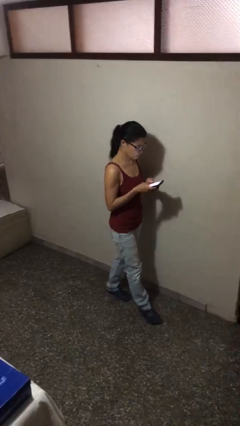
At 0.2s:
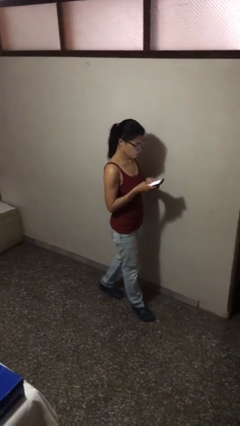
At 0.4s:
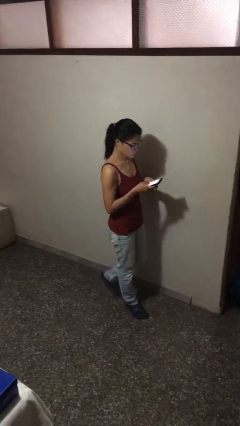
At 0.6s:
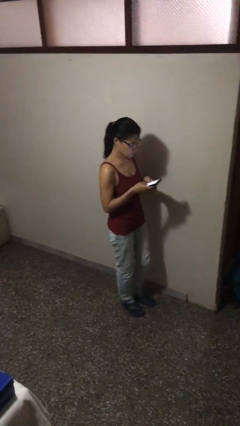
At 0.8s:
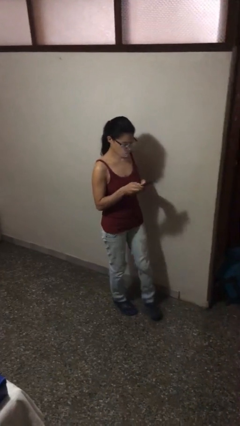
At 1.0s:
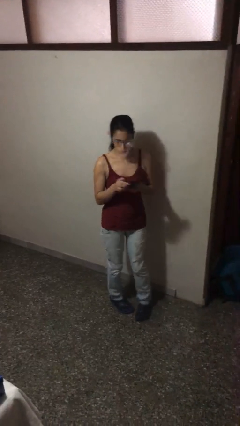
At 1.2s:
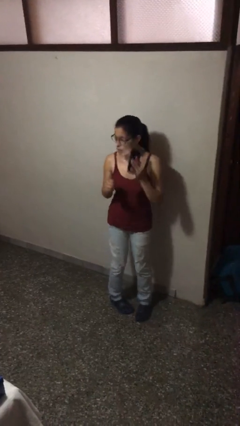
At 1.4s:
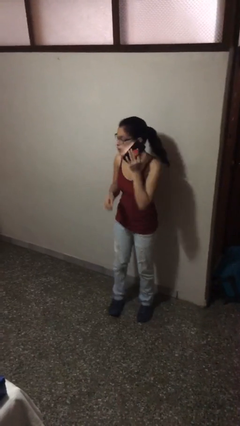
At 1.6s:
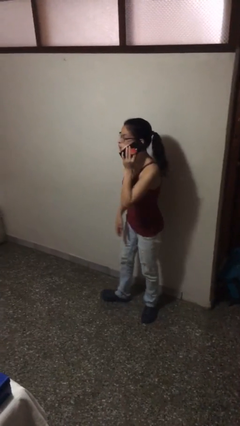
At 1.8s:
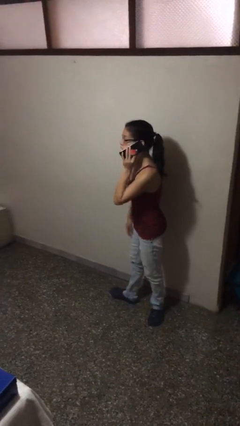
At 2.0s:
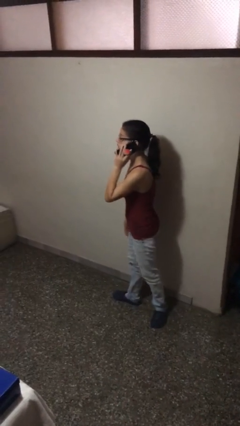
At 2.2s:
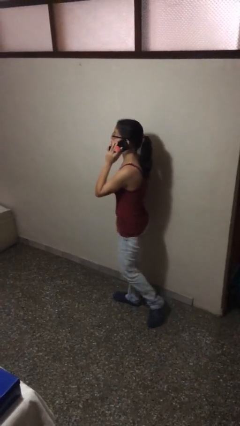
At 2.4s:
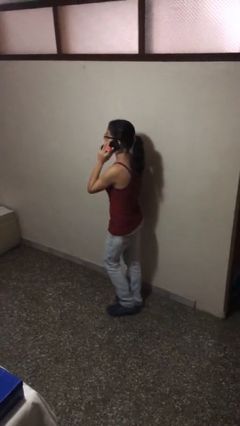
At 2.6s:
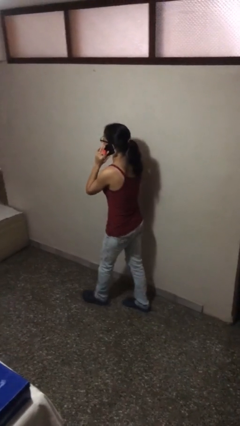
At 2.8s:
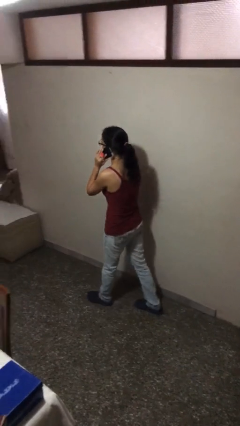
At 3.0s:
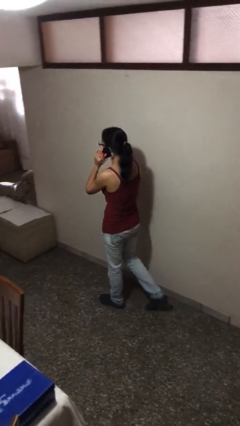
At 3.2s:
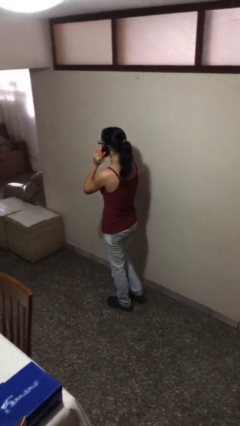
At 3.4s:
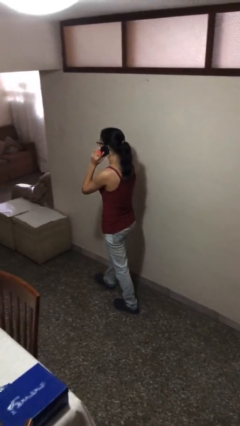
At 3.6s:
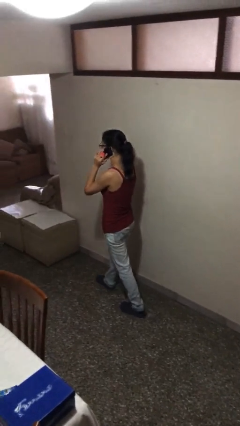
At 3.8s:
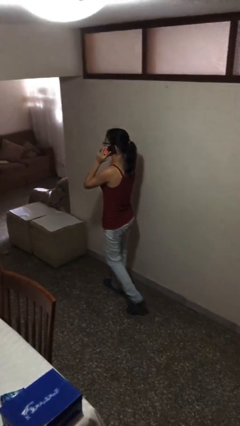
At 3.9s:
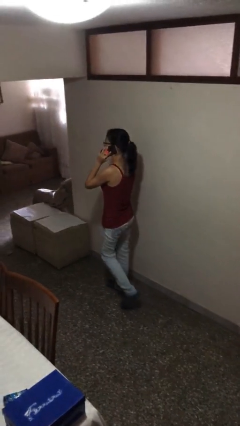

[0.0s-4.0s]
person talks on phone

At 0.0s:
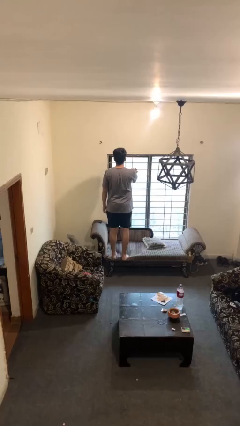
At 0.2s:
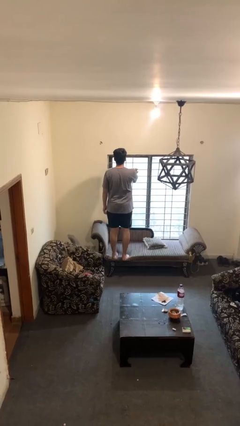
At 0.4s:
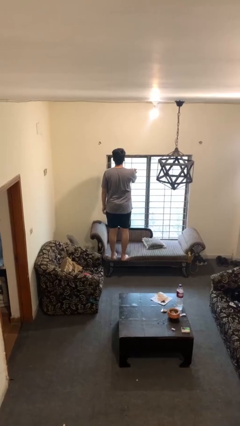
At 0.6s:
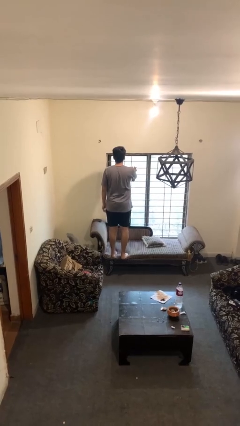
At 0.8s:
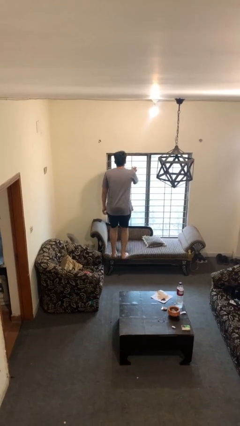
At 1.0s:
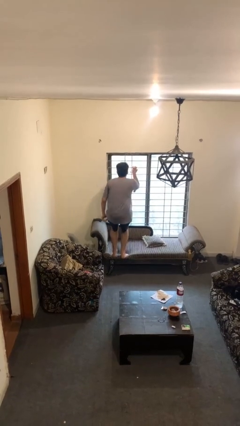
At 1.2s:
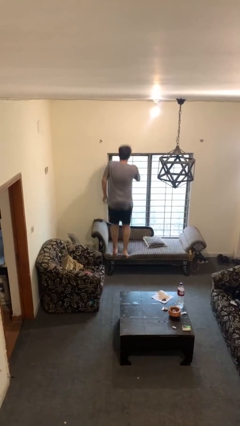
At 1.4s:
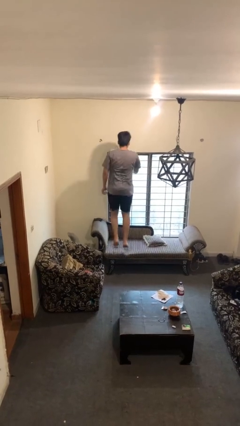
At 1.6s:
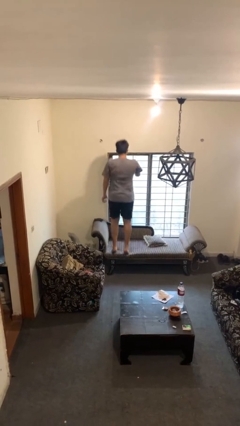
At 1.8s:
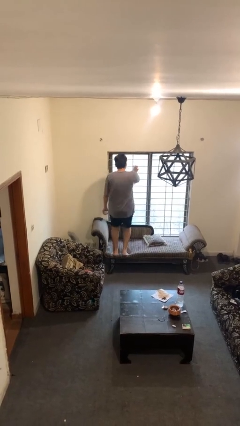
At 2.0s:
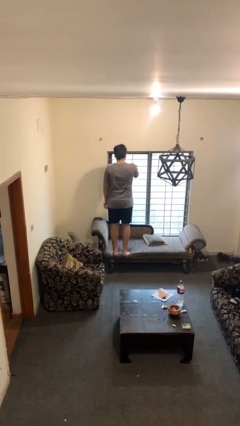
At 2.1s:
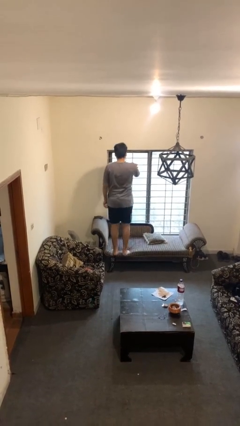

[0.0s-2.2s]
person jumps on couch

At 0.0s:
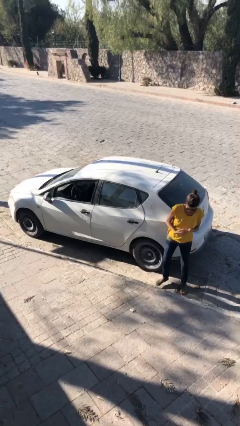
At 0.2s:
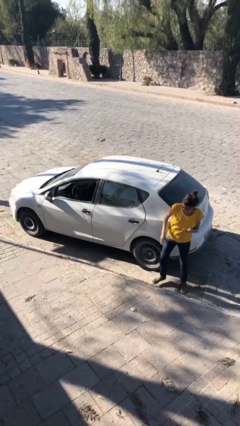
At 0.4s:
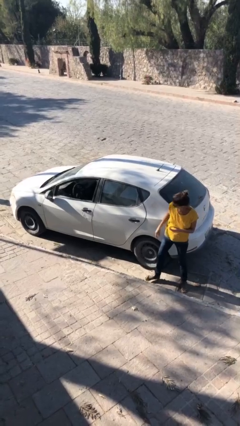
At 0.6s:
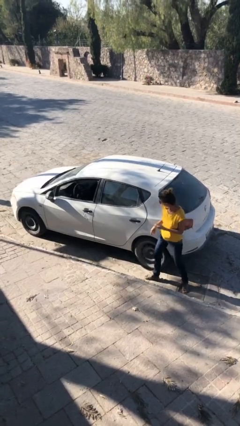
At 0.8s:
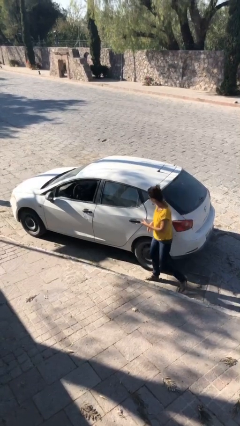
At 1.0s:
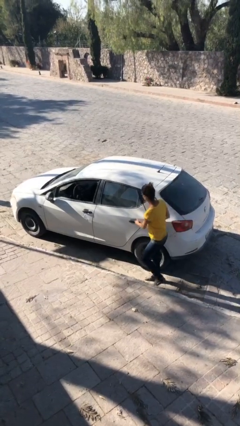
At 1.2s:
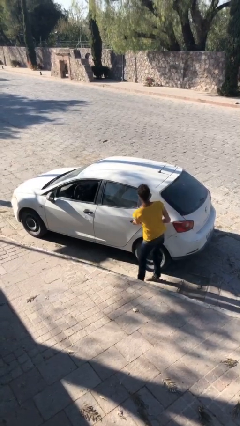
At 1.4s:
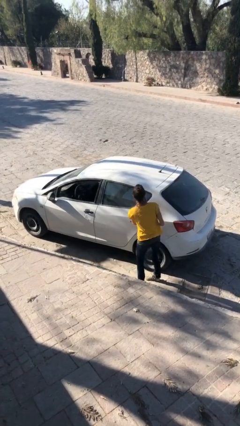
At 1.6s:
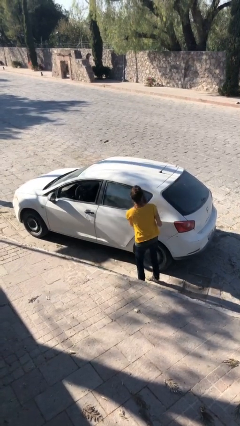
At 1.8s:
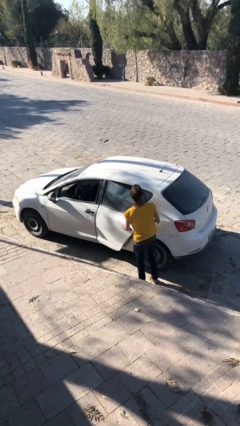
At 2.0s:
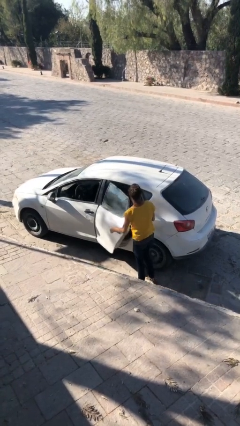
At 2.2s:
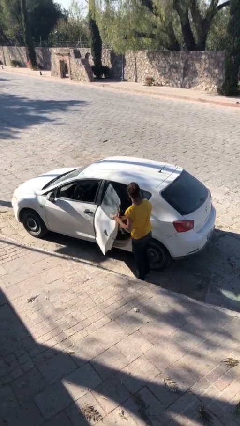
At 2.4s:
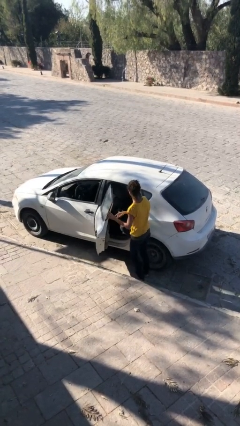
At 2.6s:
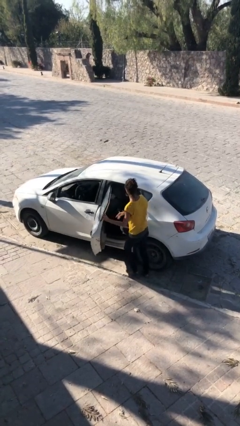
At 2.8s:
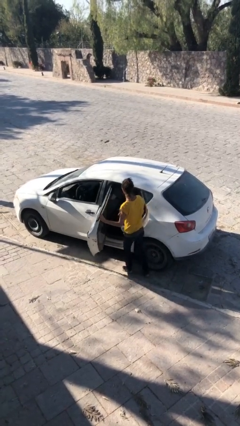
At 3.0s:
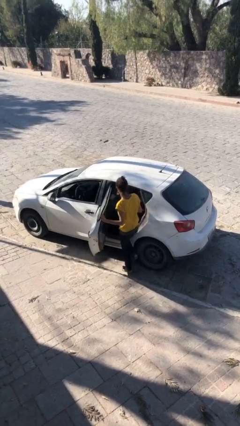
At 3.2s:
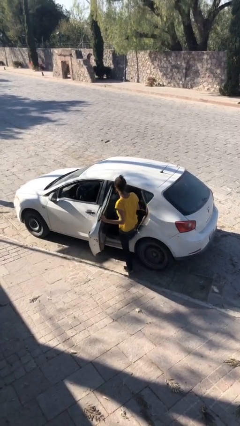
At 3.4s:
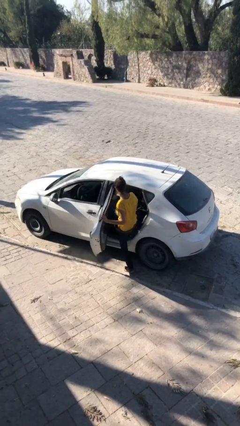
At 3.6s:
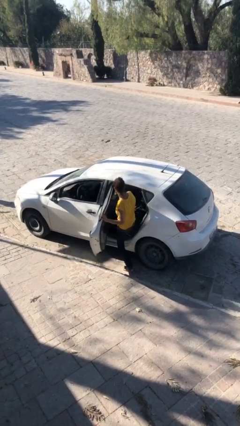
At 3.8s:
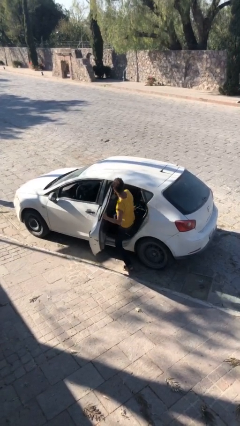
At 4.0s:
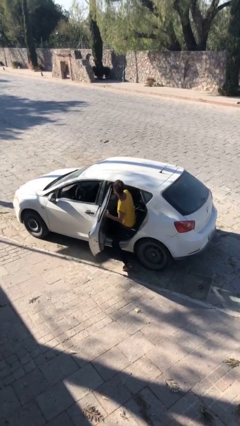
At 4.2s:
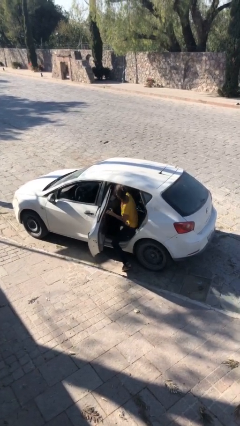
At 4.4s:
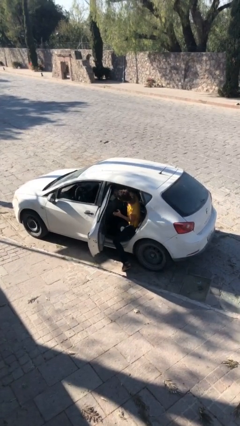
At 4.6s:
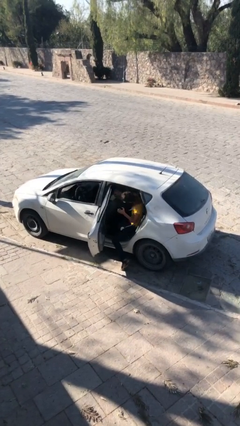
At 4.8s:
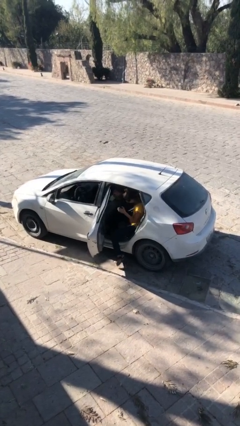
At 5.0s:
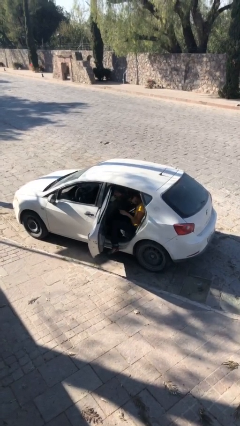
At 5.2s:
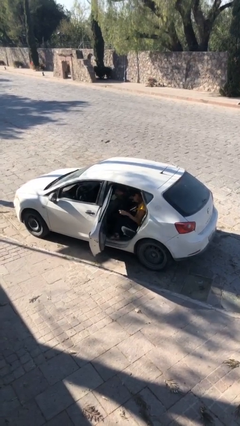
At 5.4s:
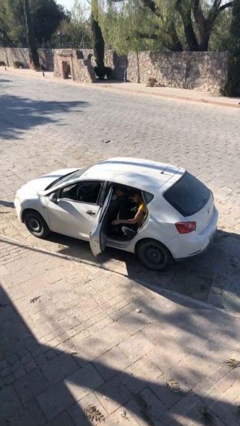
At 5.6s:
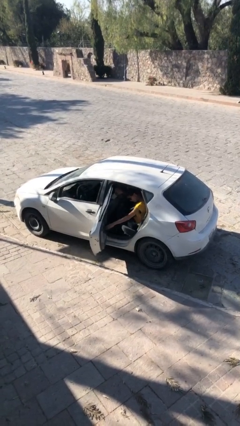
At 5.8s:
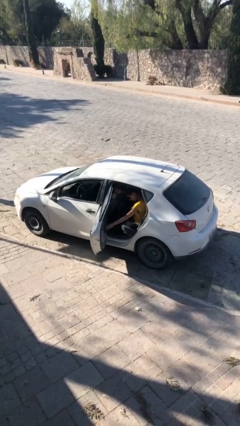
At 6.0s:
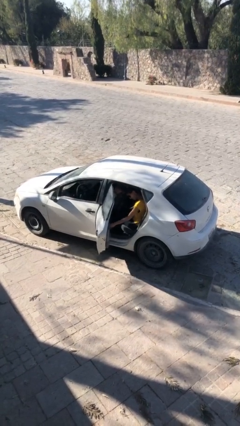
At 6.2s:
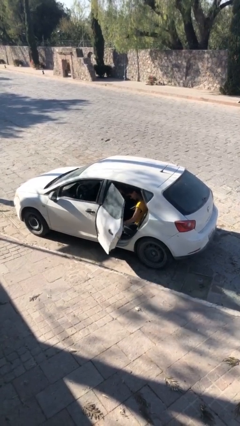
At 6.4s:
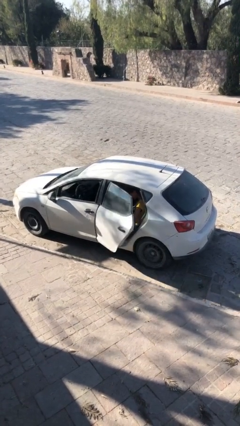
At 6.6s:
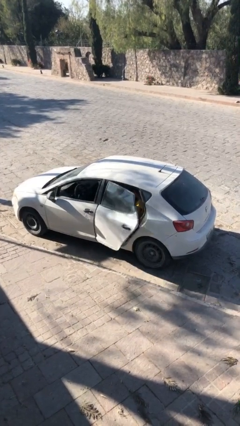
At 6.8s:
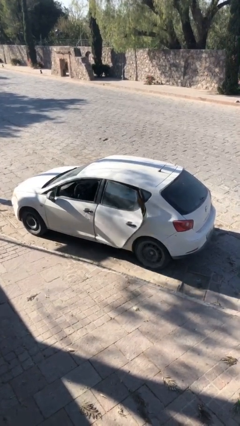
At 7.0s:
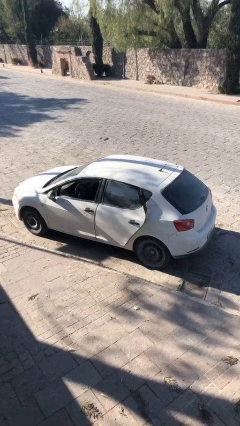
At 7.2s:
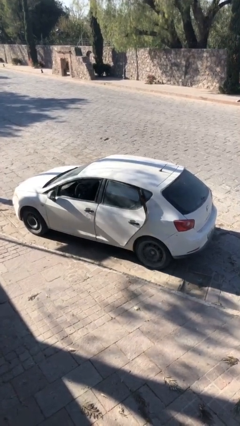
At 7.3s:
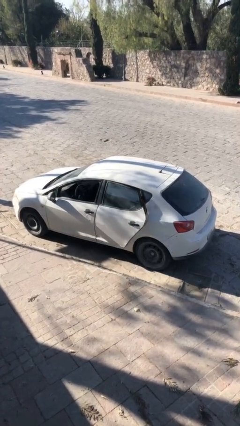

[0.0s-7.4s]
car picks up person

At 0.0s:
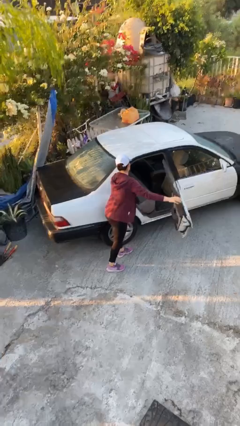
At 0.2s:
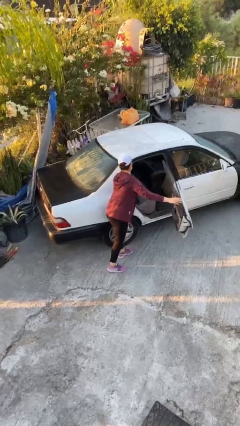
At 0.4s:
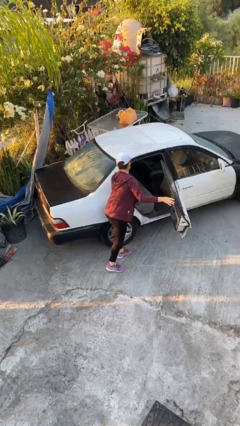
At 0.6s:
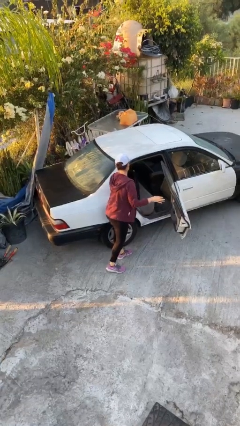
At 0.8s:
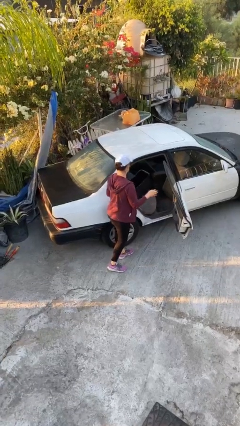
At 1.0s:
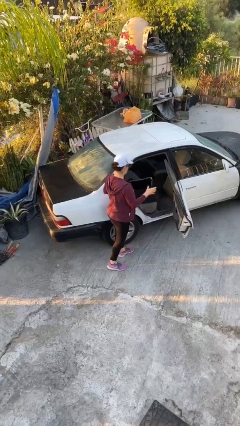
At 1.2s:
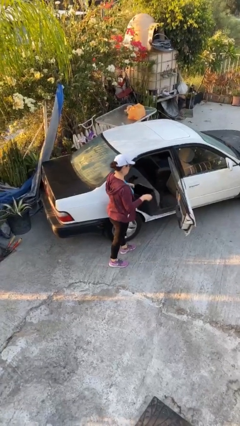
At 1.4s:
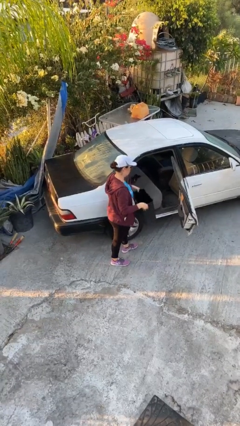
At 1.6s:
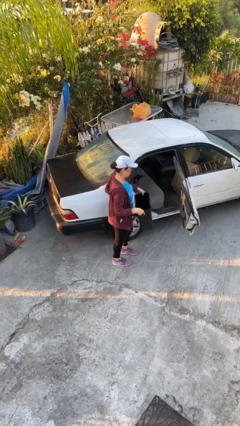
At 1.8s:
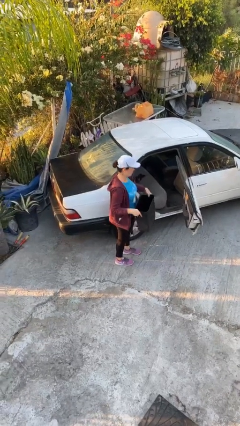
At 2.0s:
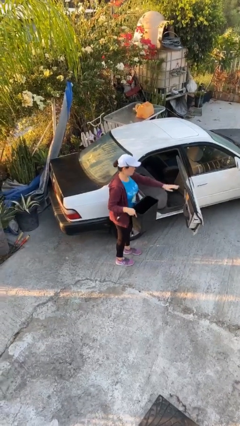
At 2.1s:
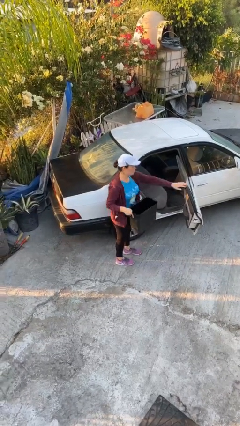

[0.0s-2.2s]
person unloads car

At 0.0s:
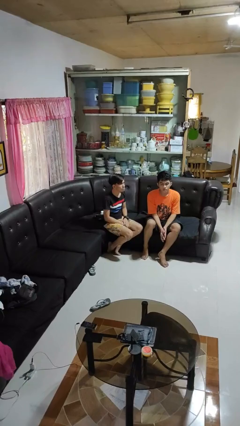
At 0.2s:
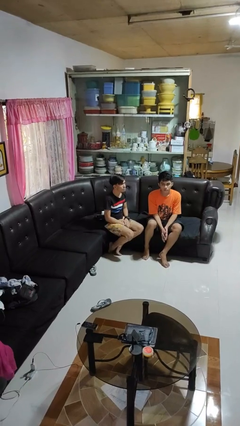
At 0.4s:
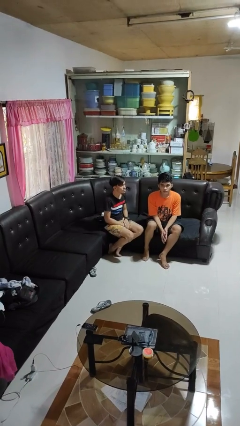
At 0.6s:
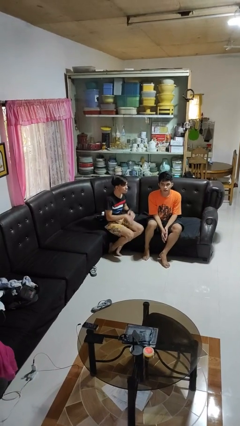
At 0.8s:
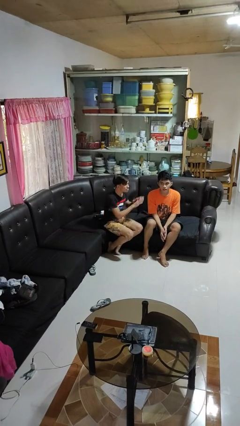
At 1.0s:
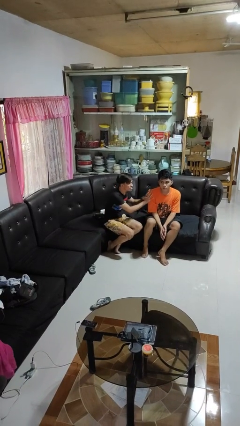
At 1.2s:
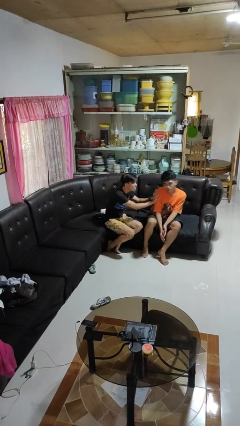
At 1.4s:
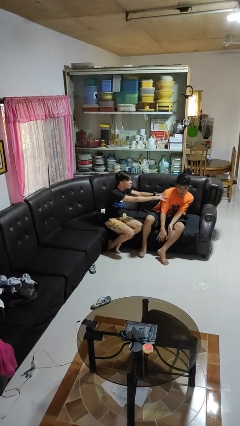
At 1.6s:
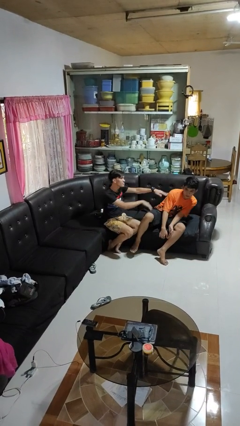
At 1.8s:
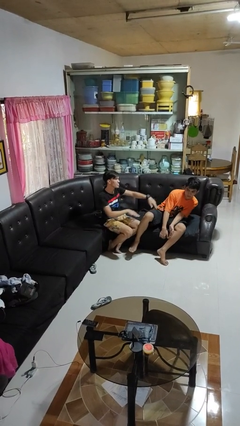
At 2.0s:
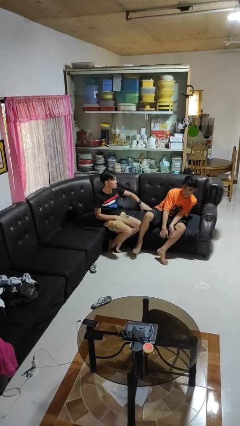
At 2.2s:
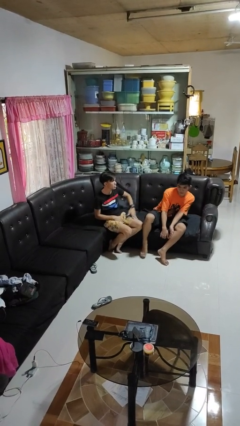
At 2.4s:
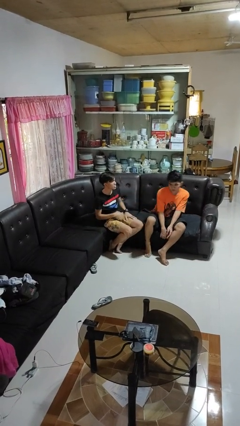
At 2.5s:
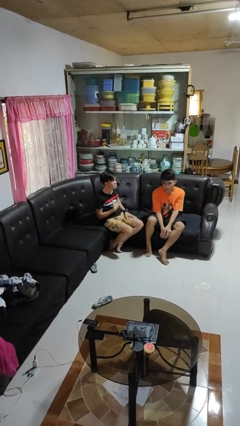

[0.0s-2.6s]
person shoves person
